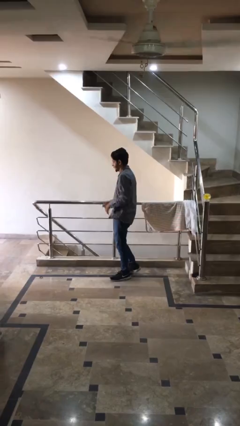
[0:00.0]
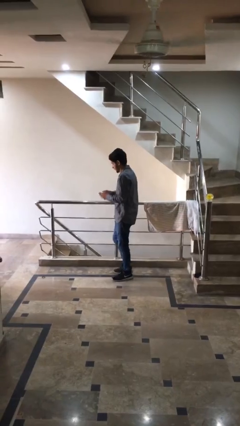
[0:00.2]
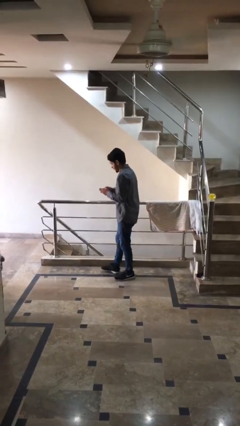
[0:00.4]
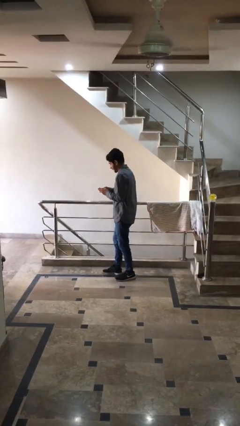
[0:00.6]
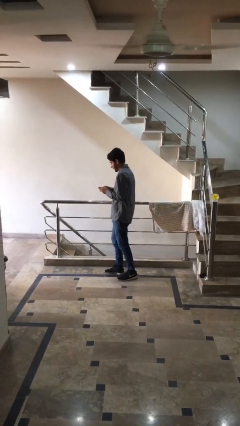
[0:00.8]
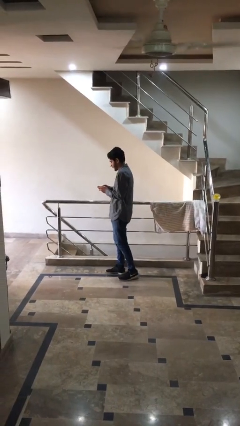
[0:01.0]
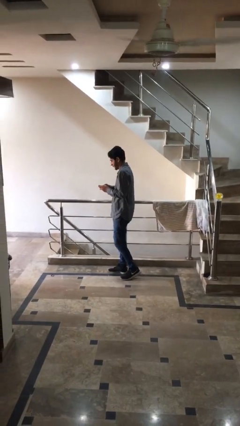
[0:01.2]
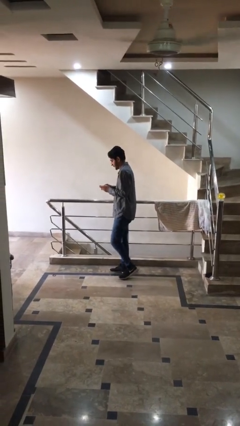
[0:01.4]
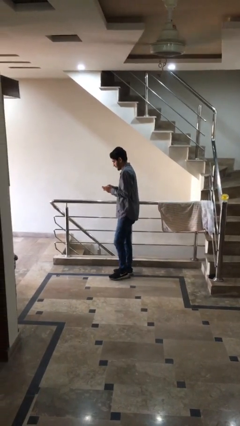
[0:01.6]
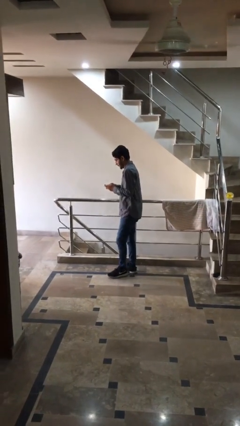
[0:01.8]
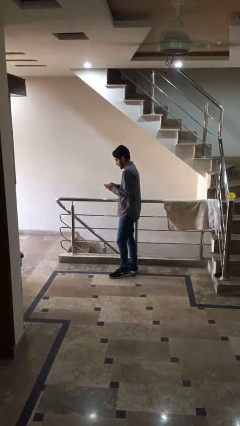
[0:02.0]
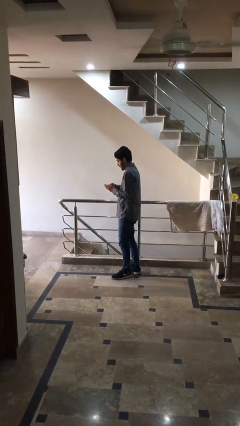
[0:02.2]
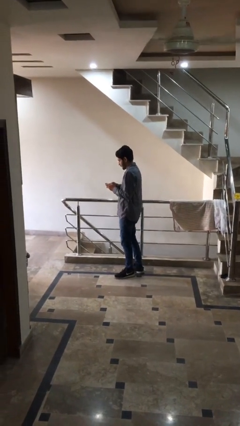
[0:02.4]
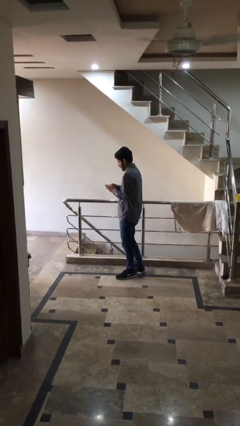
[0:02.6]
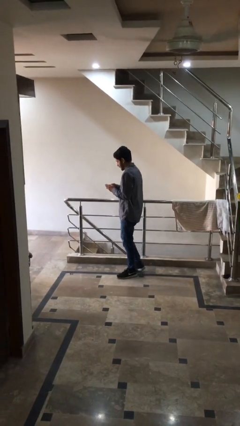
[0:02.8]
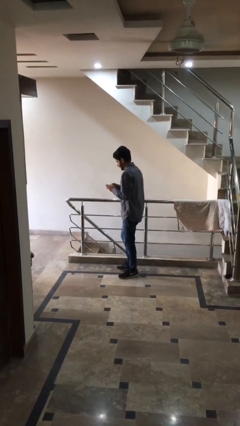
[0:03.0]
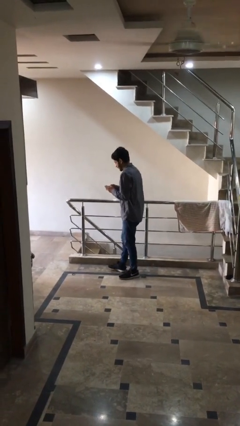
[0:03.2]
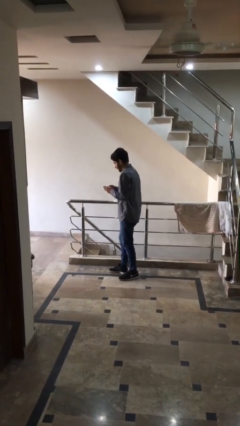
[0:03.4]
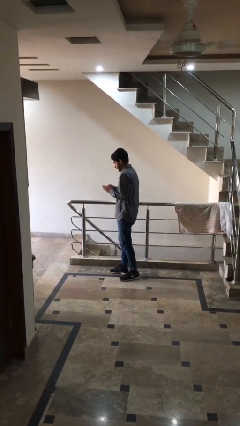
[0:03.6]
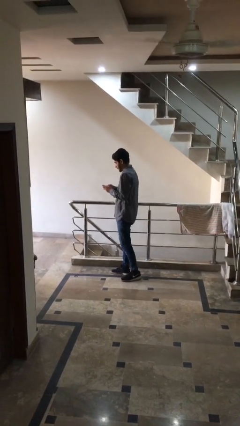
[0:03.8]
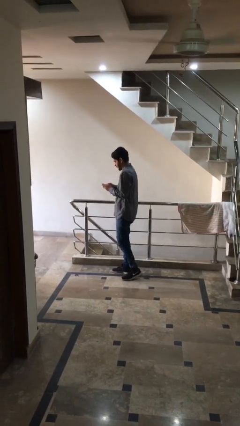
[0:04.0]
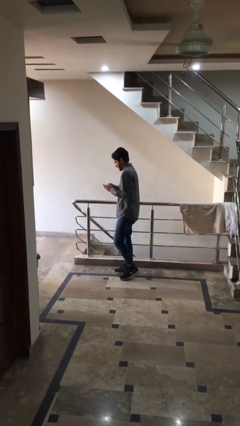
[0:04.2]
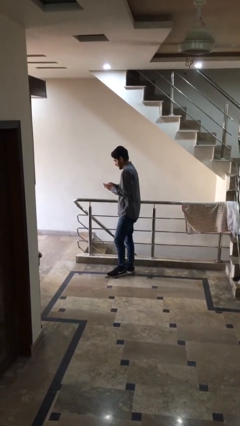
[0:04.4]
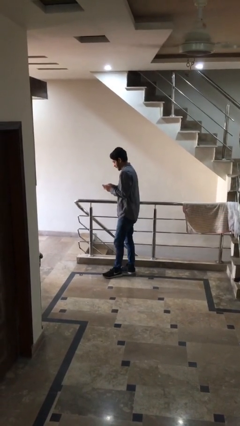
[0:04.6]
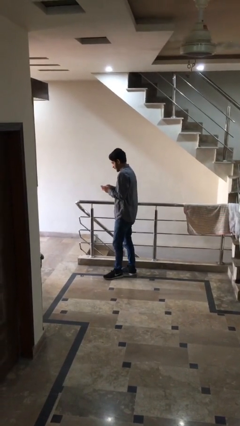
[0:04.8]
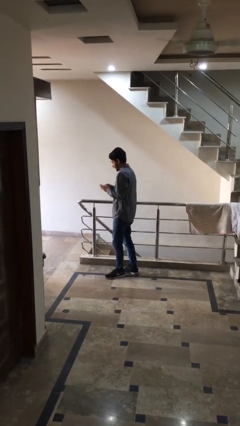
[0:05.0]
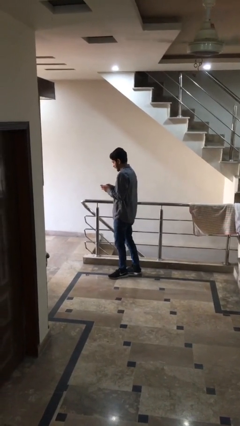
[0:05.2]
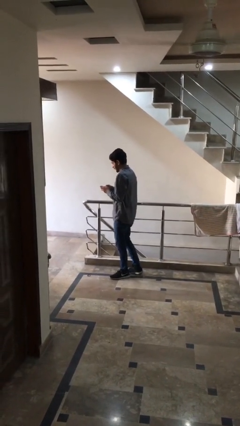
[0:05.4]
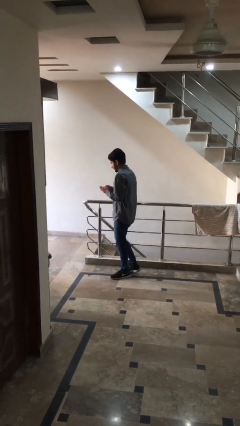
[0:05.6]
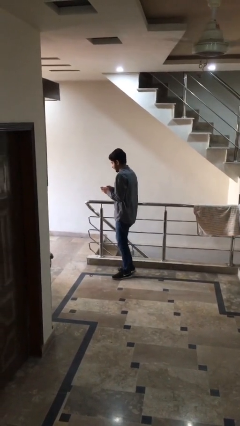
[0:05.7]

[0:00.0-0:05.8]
person texts on phone

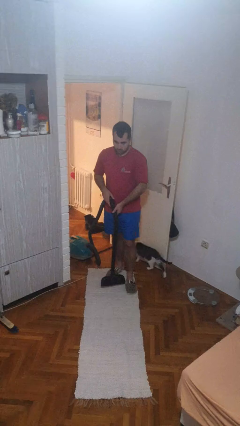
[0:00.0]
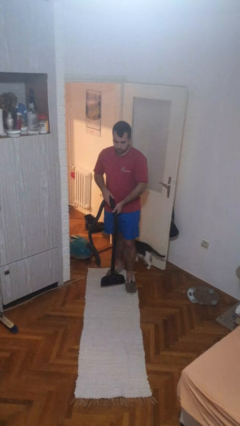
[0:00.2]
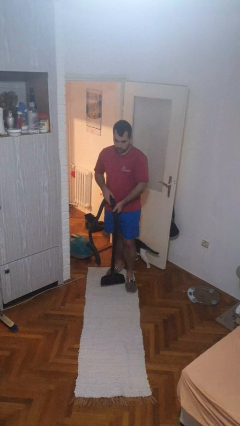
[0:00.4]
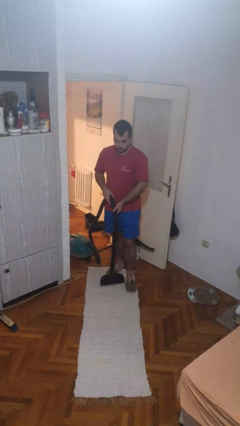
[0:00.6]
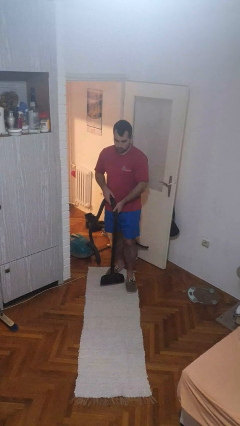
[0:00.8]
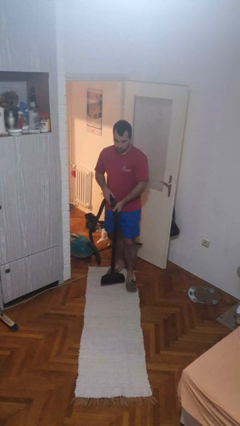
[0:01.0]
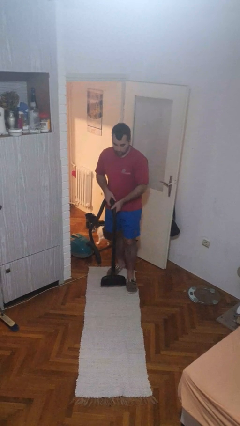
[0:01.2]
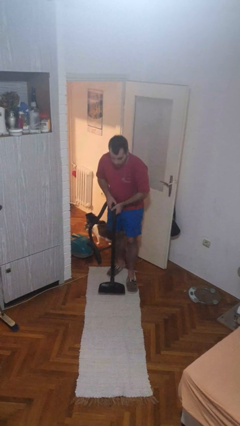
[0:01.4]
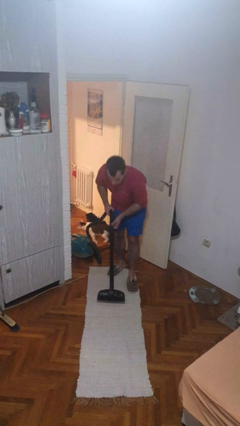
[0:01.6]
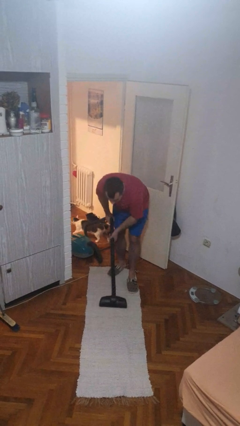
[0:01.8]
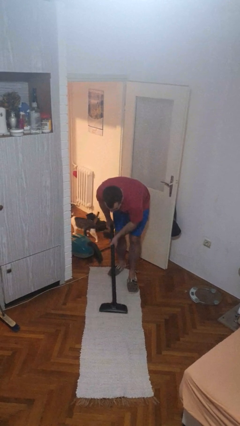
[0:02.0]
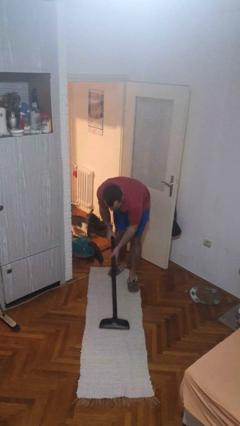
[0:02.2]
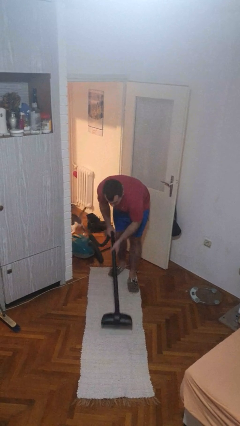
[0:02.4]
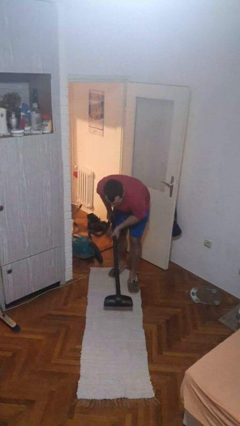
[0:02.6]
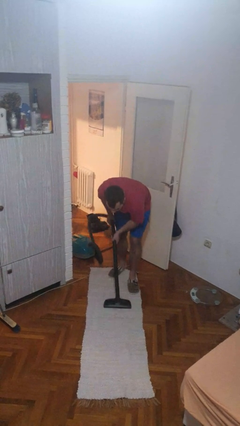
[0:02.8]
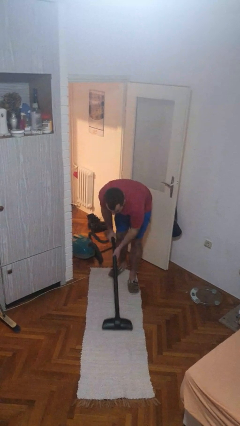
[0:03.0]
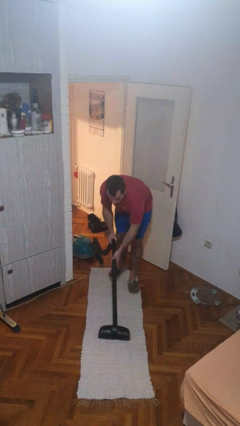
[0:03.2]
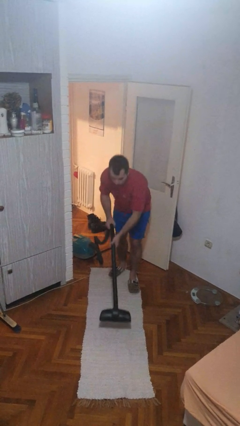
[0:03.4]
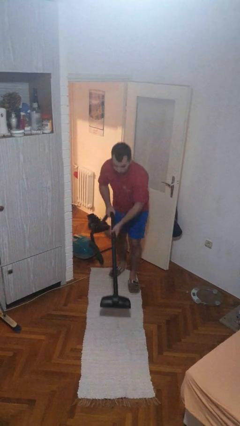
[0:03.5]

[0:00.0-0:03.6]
person vacuums carpet

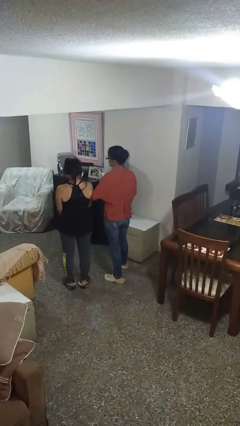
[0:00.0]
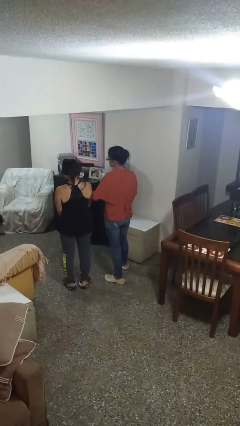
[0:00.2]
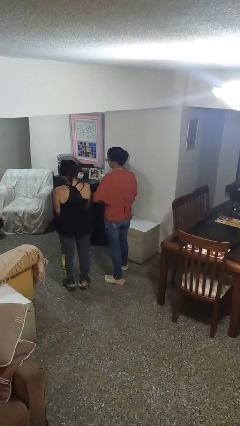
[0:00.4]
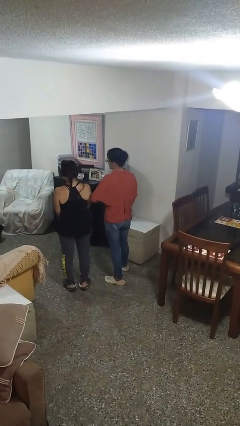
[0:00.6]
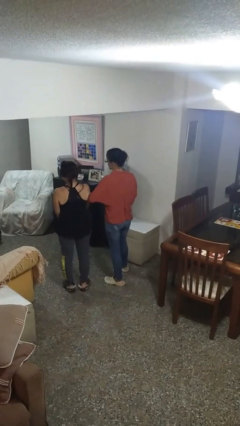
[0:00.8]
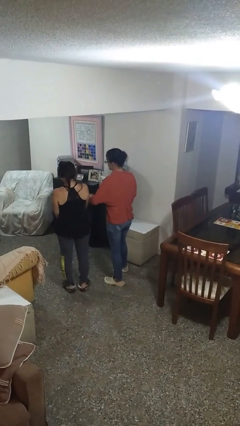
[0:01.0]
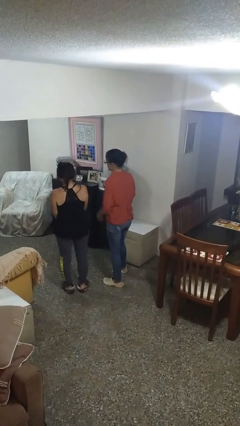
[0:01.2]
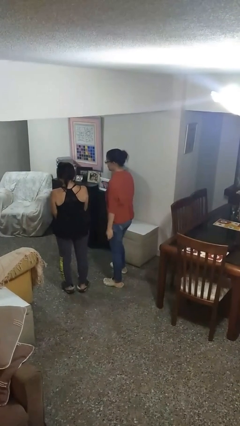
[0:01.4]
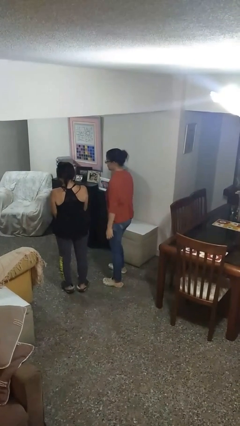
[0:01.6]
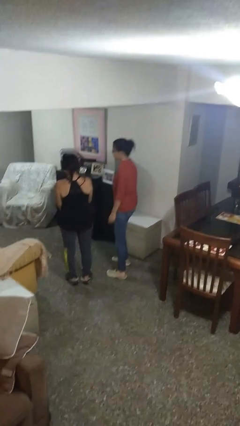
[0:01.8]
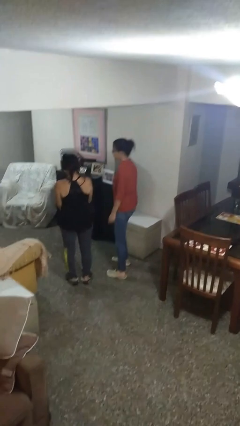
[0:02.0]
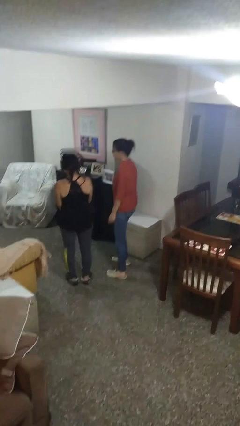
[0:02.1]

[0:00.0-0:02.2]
person nudges person with elbow

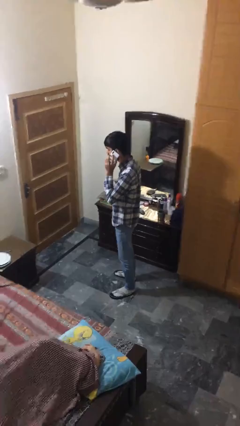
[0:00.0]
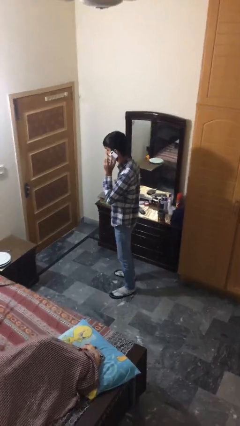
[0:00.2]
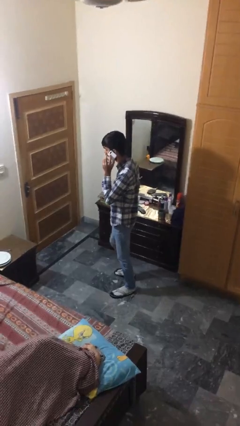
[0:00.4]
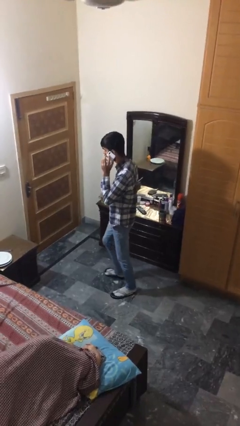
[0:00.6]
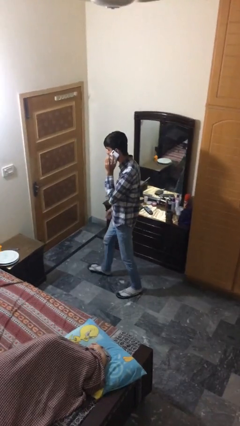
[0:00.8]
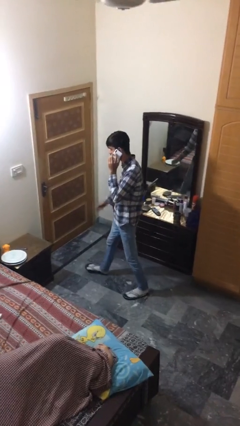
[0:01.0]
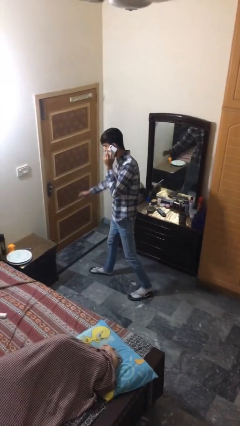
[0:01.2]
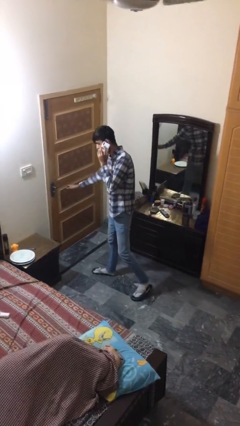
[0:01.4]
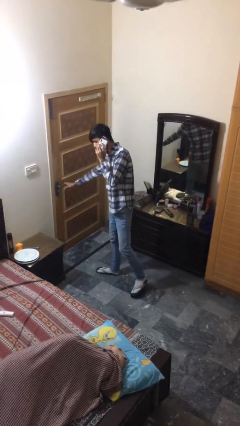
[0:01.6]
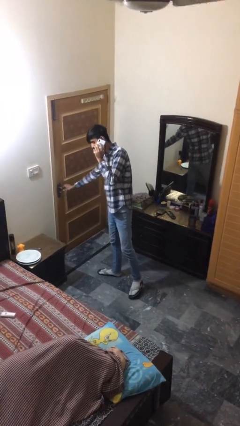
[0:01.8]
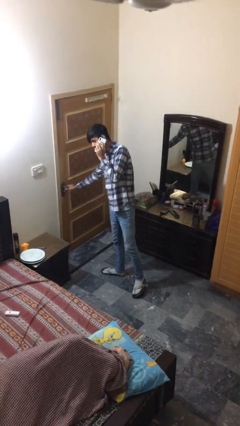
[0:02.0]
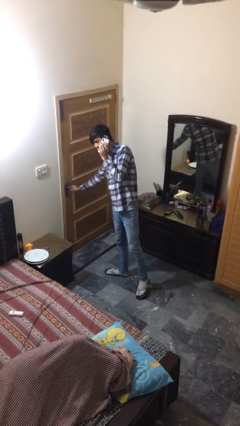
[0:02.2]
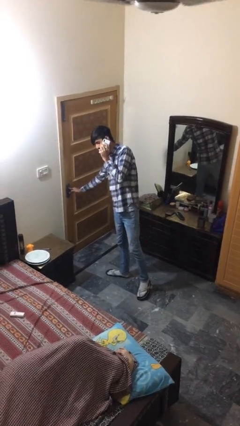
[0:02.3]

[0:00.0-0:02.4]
person opens facility door

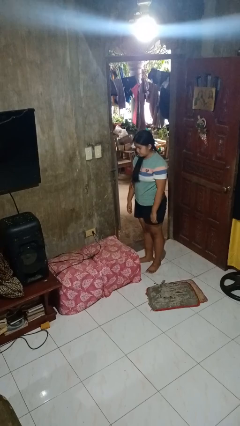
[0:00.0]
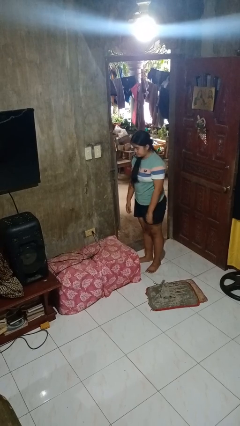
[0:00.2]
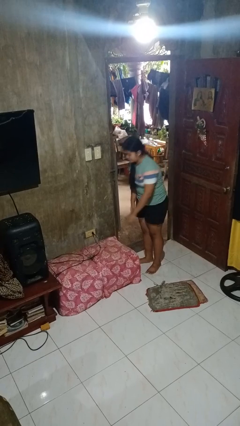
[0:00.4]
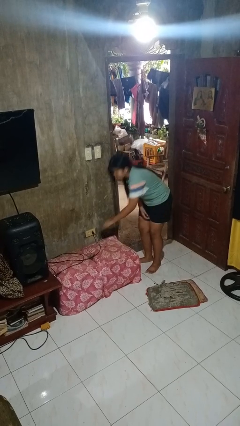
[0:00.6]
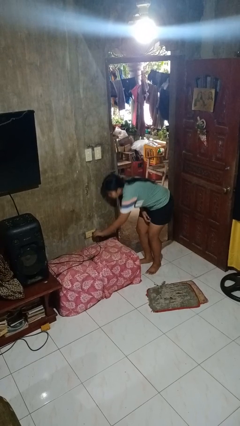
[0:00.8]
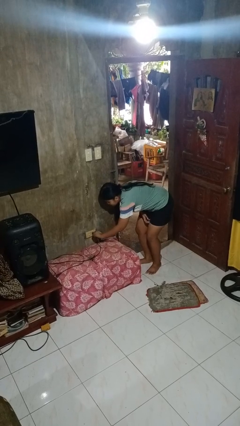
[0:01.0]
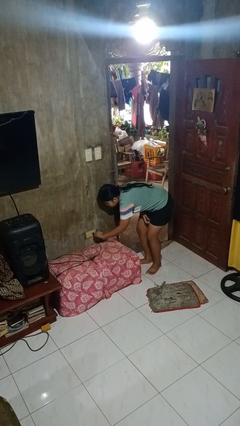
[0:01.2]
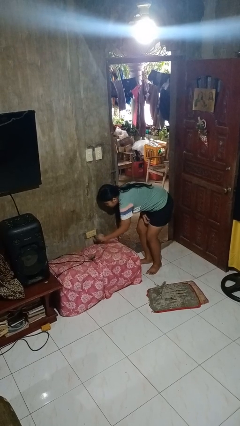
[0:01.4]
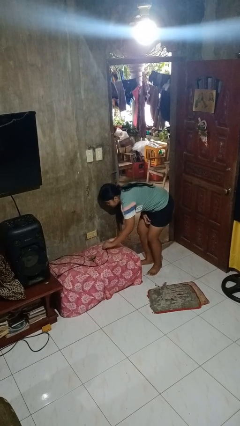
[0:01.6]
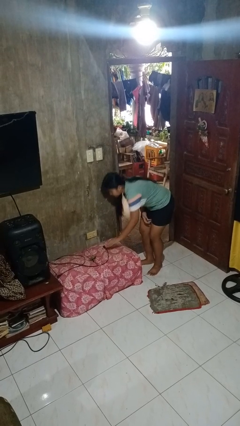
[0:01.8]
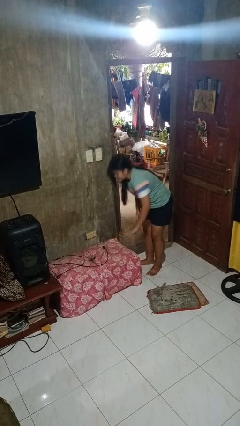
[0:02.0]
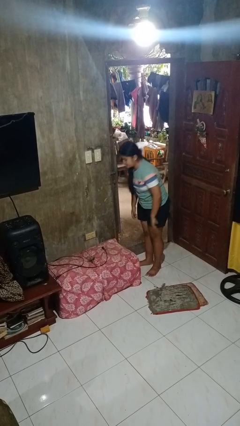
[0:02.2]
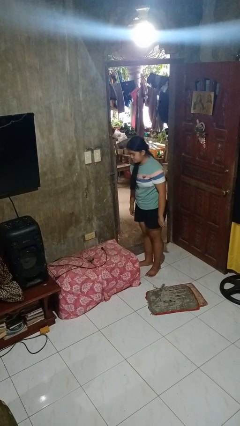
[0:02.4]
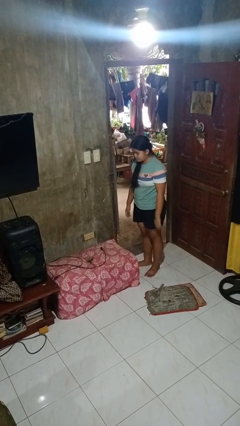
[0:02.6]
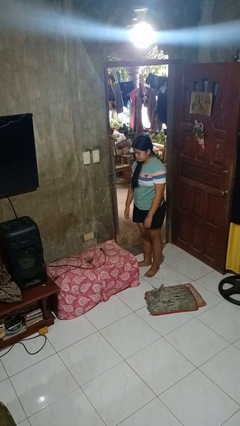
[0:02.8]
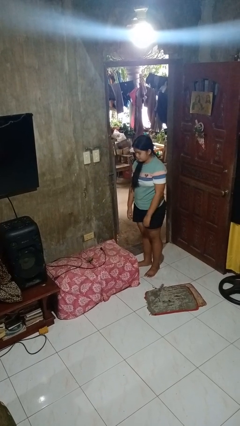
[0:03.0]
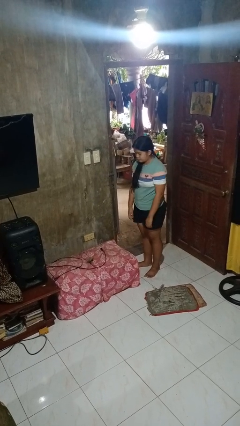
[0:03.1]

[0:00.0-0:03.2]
person unplugs from electrical socket

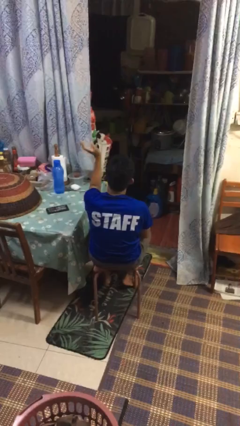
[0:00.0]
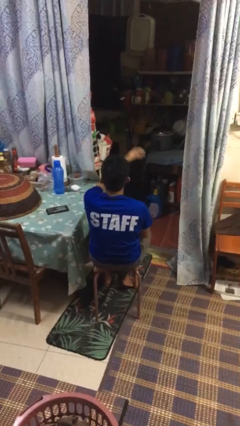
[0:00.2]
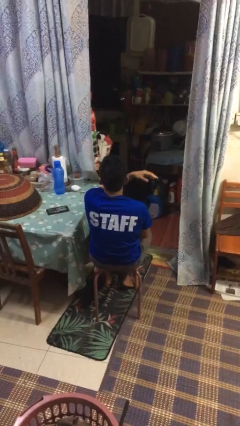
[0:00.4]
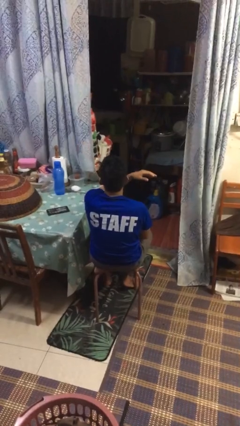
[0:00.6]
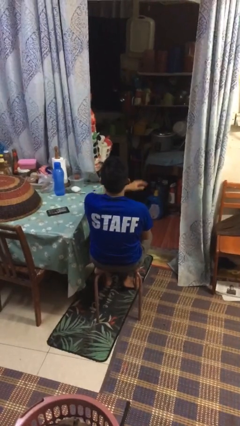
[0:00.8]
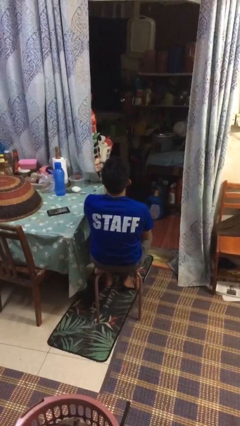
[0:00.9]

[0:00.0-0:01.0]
person gestures swipe right
